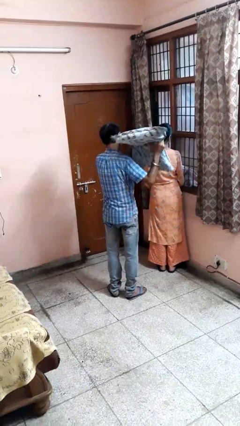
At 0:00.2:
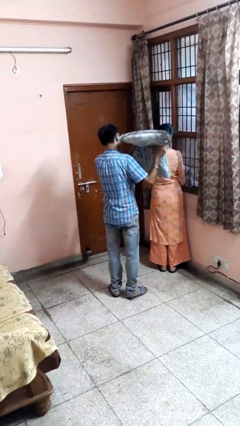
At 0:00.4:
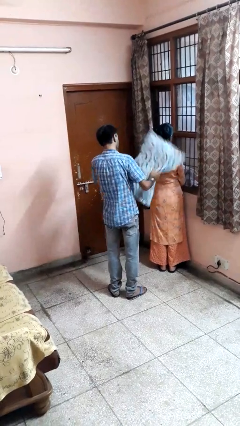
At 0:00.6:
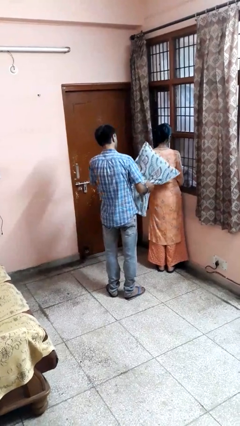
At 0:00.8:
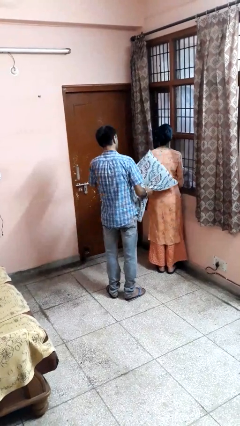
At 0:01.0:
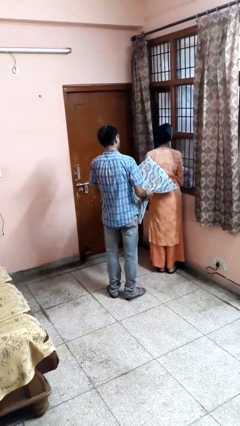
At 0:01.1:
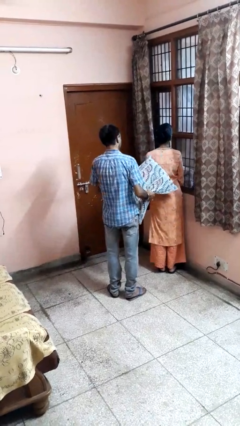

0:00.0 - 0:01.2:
person hits person with pillow

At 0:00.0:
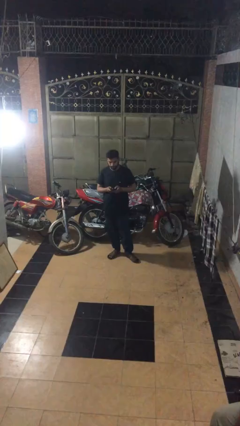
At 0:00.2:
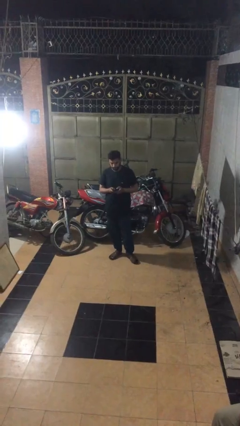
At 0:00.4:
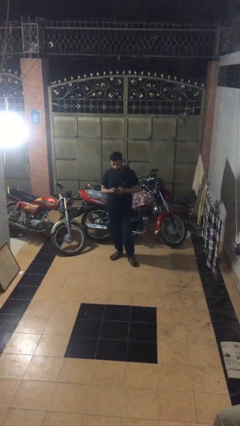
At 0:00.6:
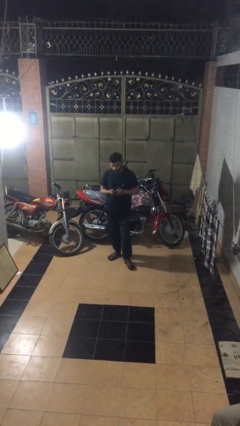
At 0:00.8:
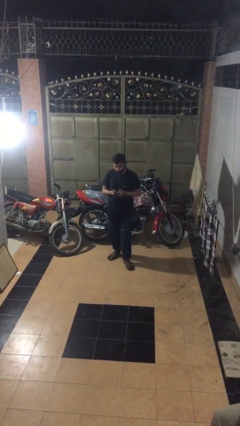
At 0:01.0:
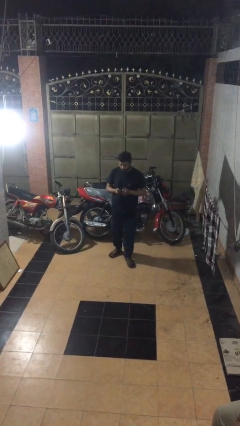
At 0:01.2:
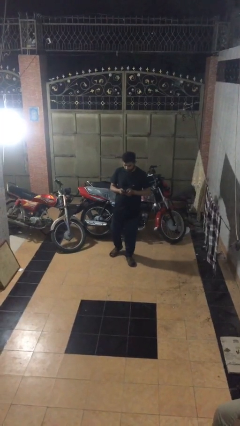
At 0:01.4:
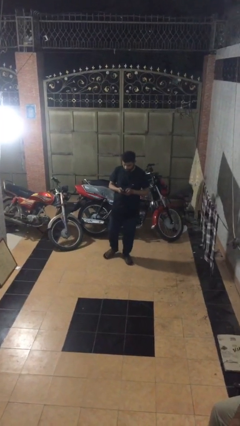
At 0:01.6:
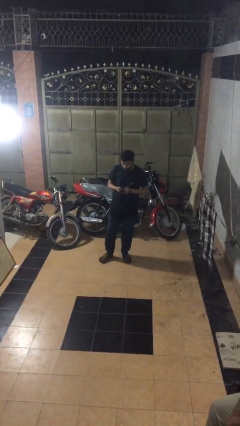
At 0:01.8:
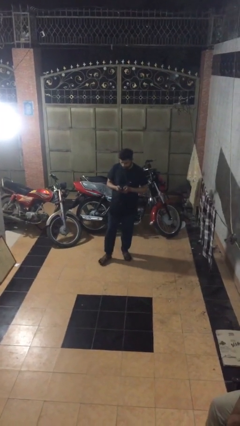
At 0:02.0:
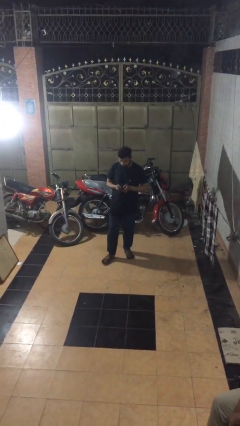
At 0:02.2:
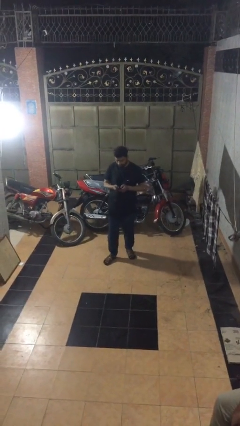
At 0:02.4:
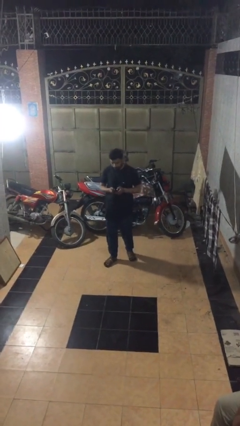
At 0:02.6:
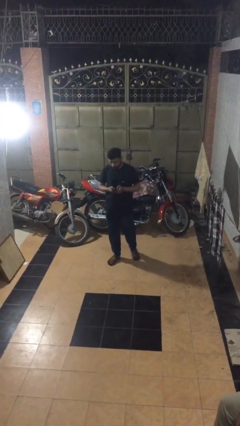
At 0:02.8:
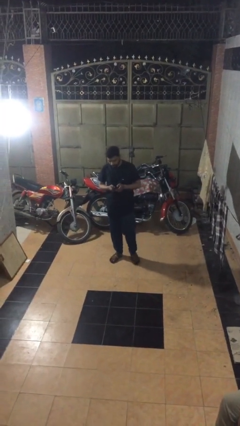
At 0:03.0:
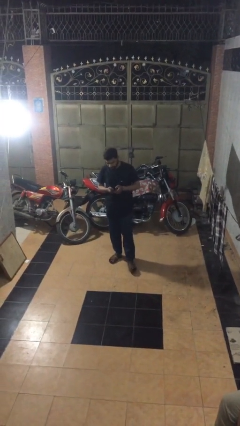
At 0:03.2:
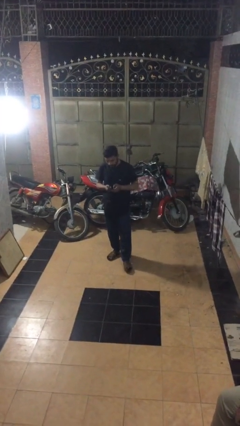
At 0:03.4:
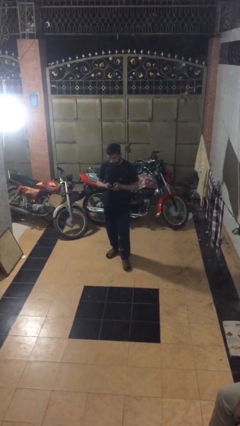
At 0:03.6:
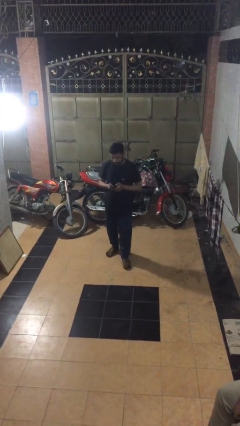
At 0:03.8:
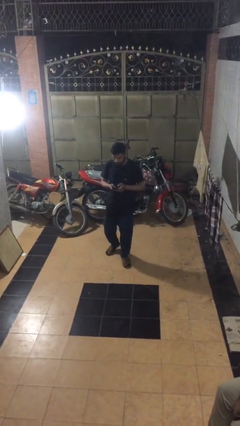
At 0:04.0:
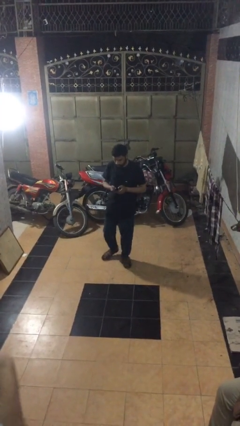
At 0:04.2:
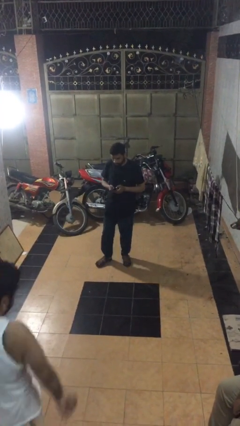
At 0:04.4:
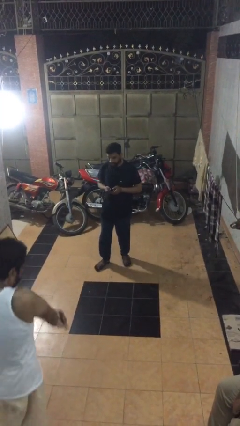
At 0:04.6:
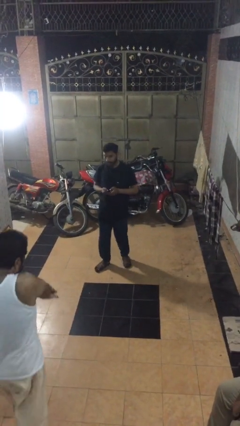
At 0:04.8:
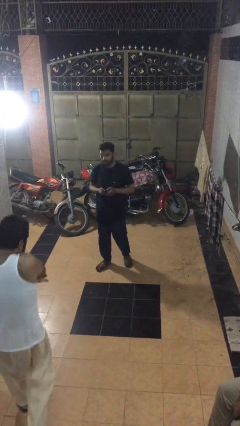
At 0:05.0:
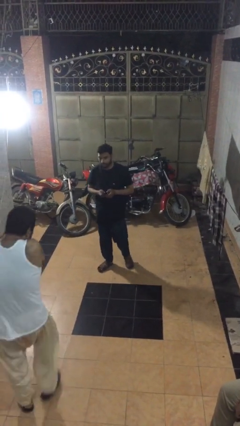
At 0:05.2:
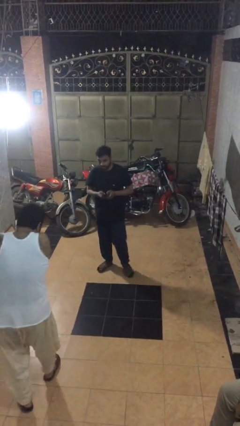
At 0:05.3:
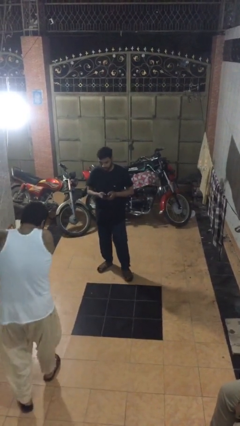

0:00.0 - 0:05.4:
person texts on phone

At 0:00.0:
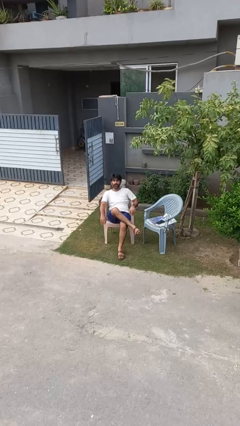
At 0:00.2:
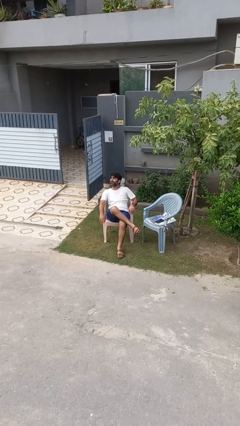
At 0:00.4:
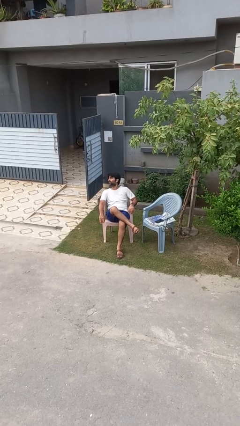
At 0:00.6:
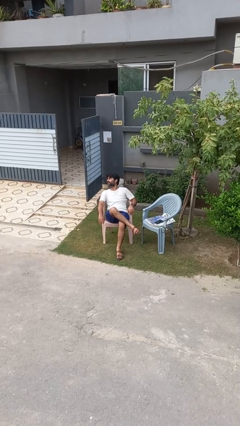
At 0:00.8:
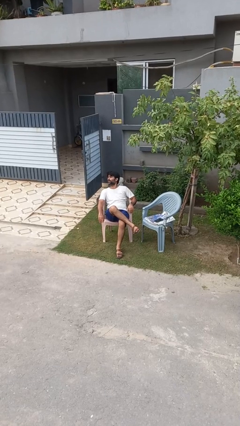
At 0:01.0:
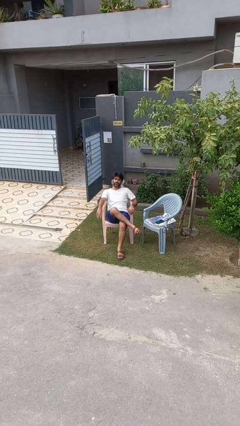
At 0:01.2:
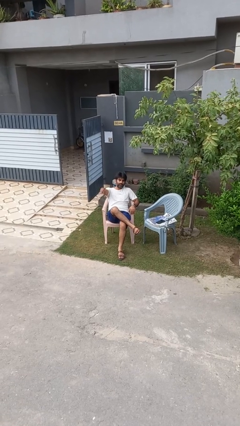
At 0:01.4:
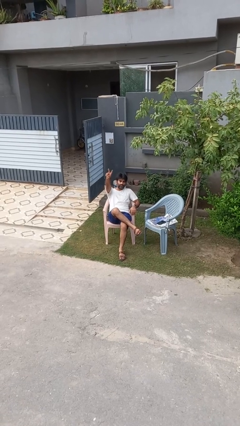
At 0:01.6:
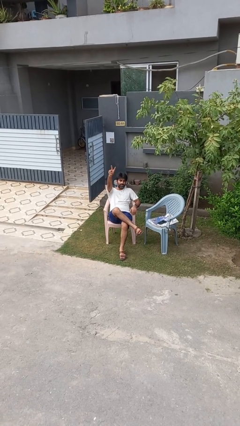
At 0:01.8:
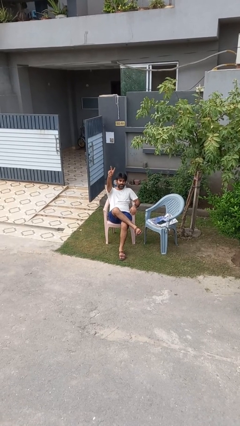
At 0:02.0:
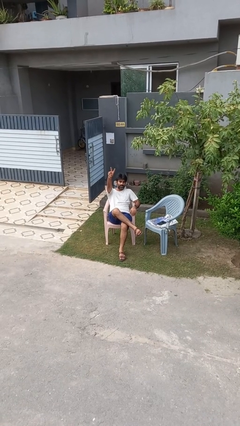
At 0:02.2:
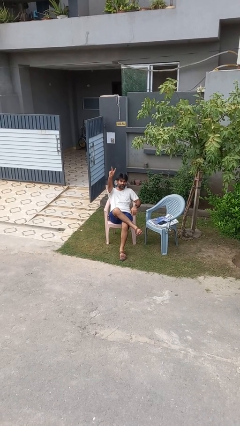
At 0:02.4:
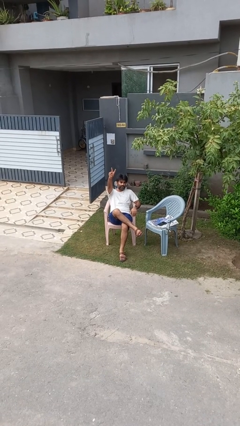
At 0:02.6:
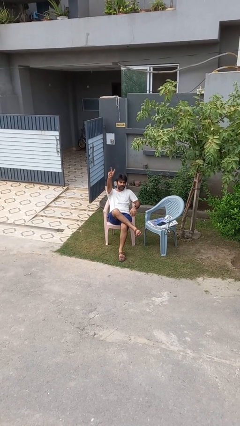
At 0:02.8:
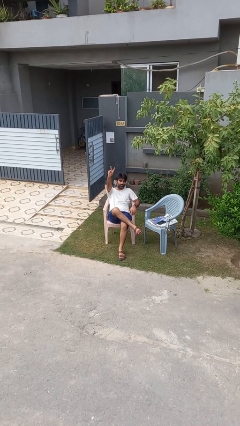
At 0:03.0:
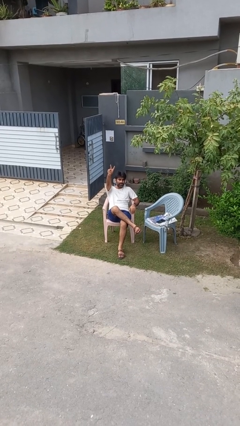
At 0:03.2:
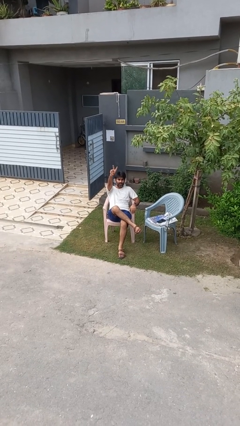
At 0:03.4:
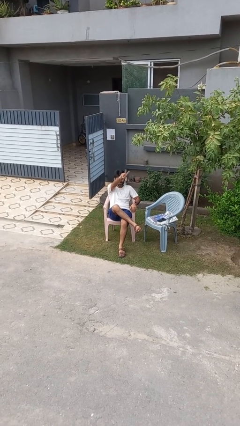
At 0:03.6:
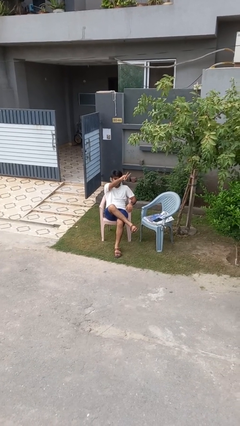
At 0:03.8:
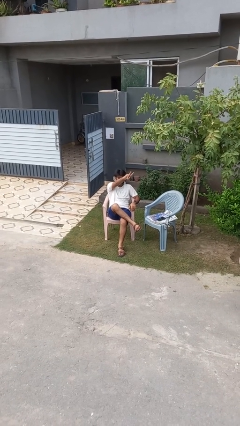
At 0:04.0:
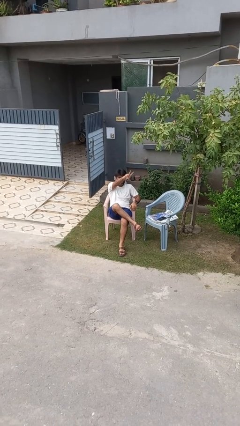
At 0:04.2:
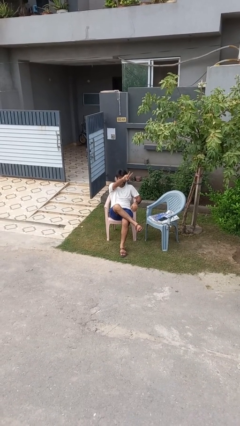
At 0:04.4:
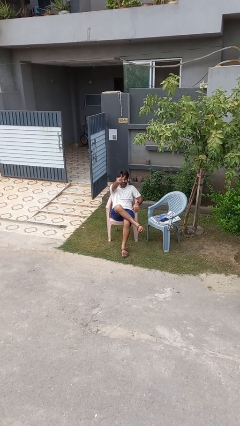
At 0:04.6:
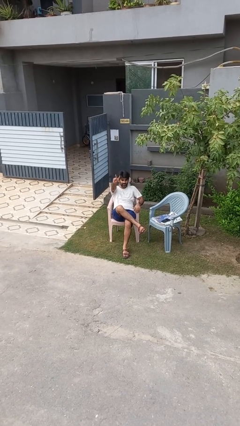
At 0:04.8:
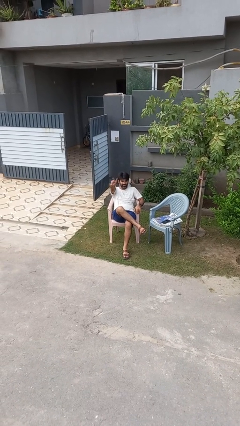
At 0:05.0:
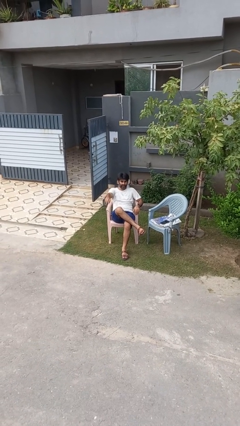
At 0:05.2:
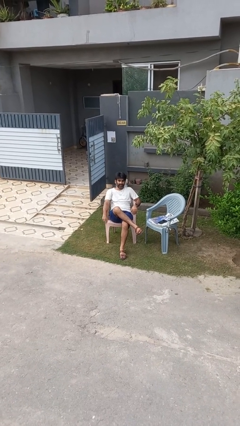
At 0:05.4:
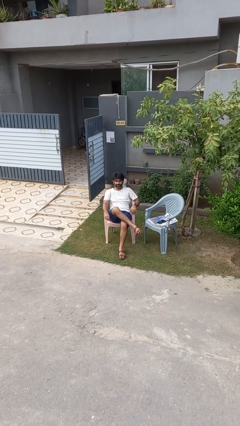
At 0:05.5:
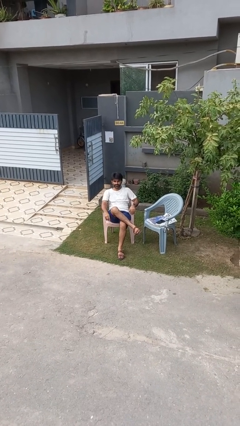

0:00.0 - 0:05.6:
person gestures peace

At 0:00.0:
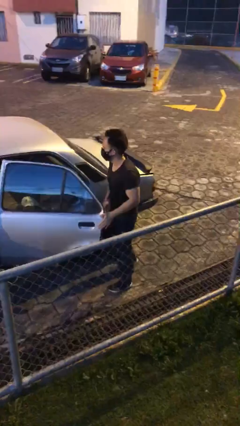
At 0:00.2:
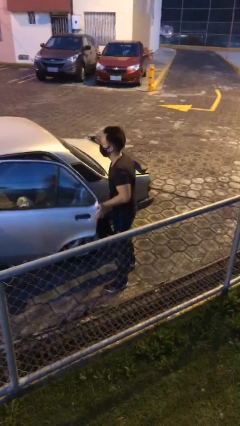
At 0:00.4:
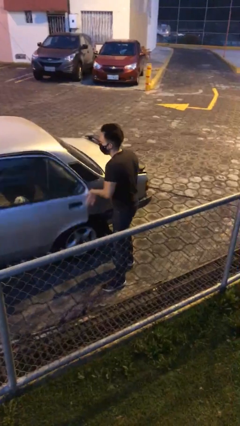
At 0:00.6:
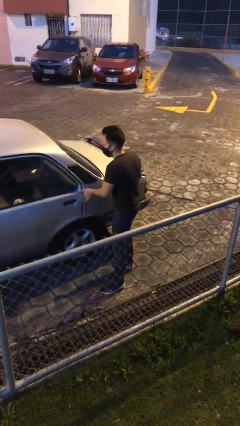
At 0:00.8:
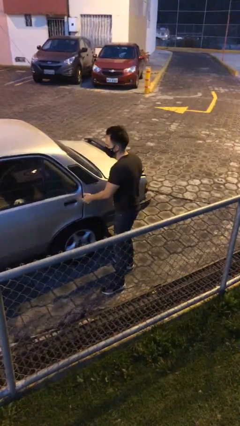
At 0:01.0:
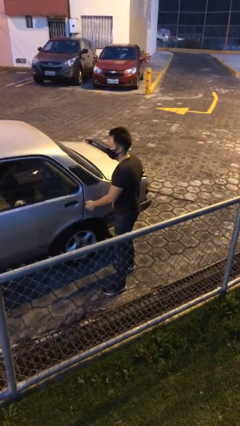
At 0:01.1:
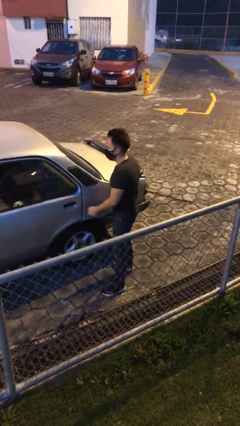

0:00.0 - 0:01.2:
person closes car door

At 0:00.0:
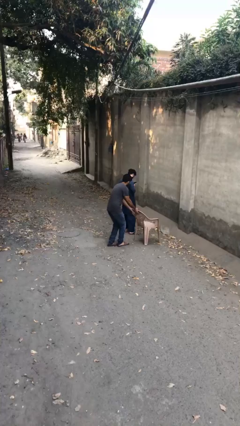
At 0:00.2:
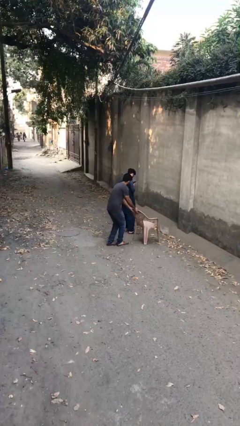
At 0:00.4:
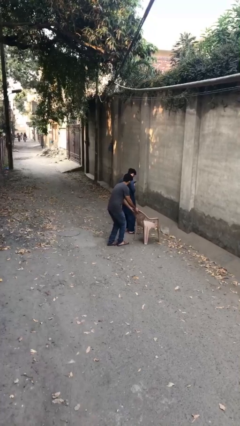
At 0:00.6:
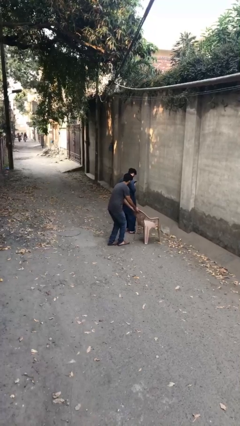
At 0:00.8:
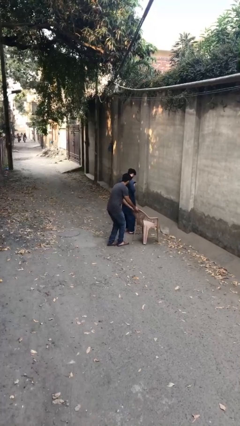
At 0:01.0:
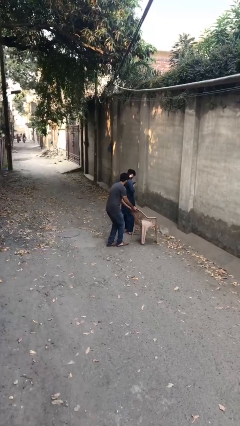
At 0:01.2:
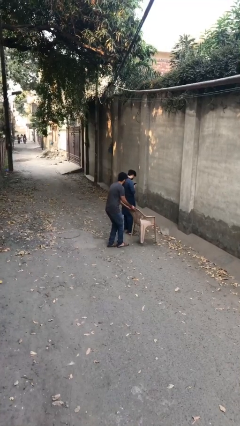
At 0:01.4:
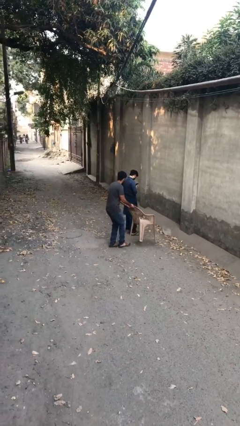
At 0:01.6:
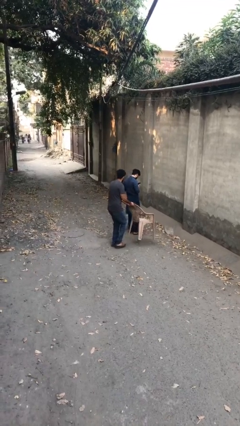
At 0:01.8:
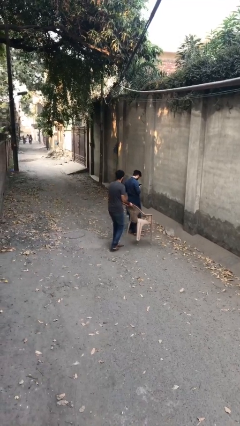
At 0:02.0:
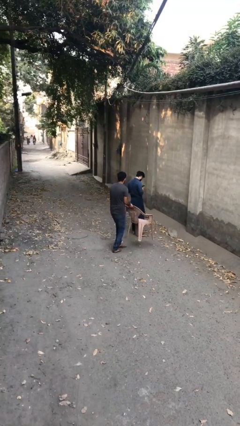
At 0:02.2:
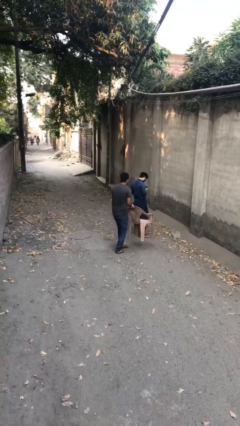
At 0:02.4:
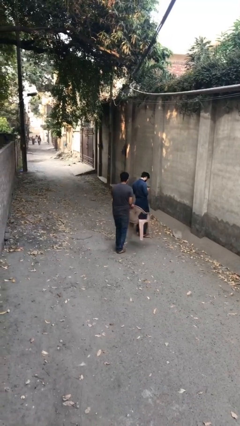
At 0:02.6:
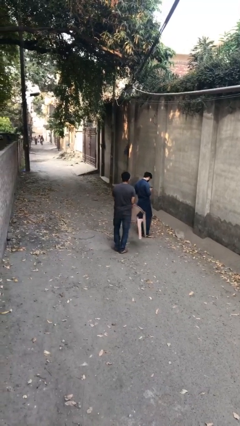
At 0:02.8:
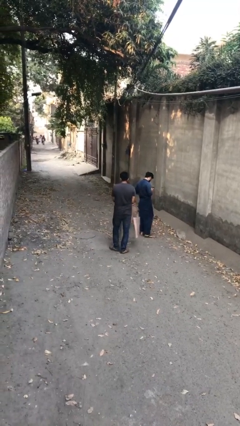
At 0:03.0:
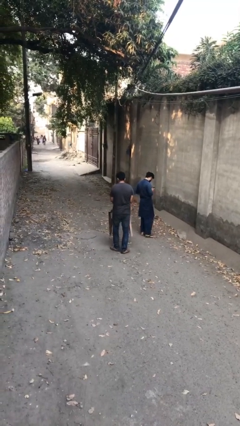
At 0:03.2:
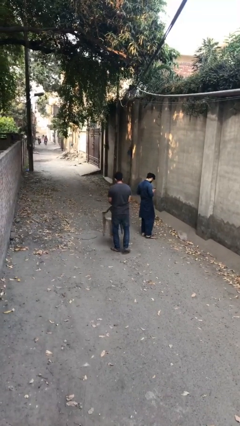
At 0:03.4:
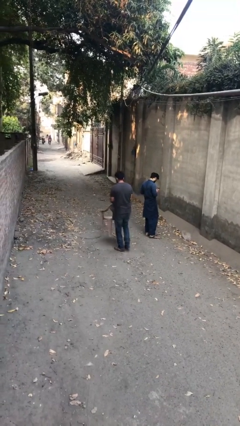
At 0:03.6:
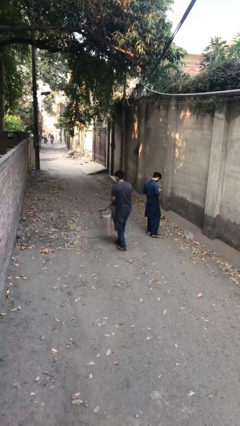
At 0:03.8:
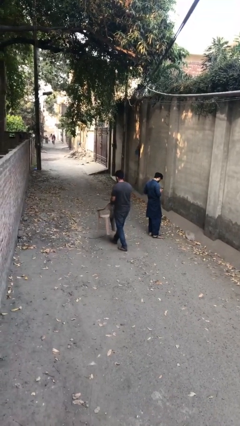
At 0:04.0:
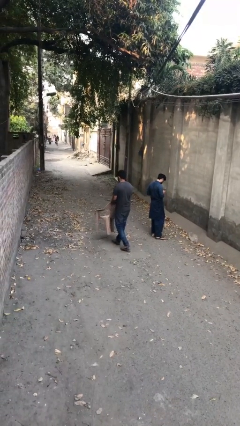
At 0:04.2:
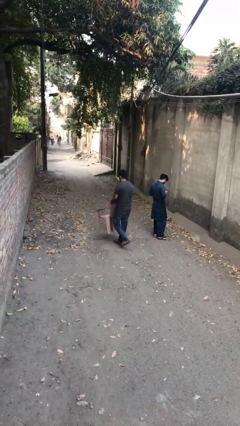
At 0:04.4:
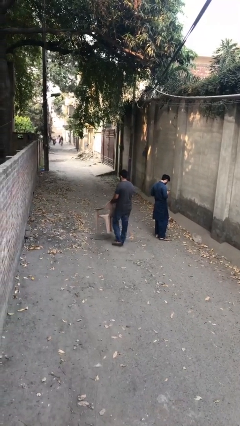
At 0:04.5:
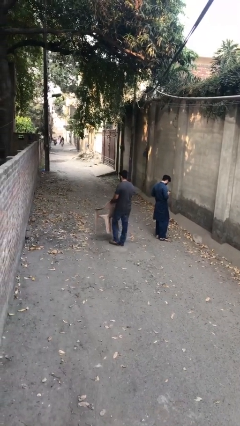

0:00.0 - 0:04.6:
person steals object from person
